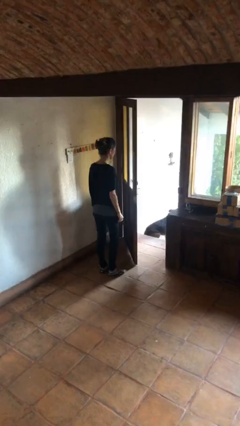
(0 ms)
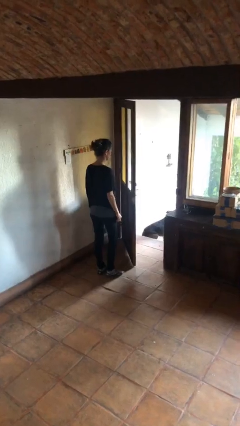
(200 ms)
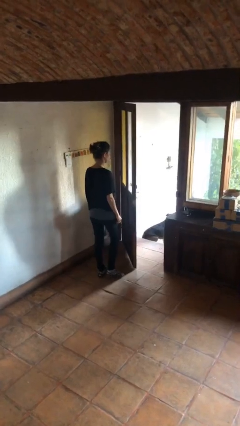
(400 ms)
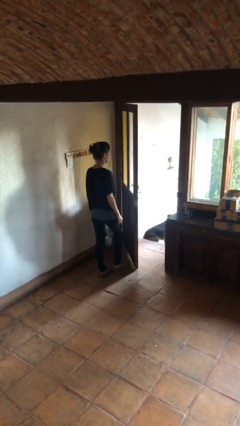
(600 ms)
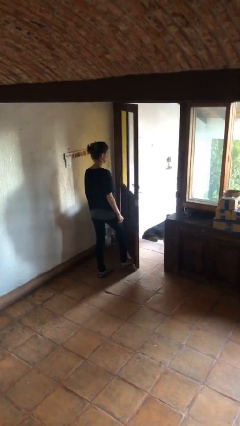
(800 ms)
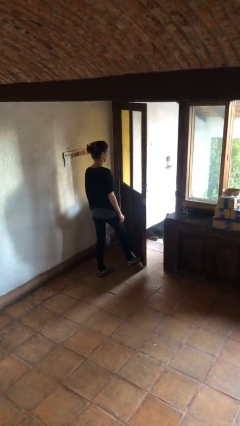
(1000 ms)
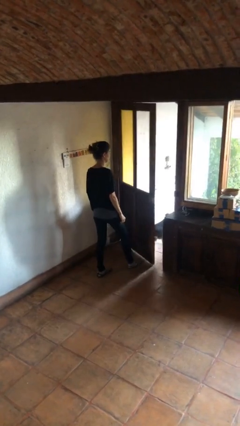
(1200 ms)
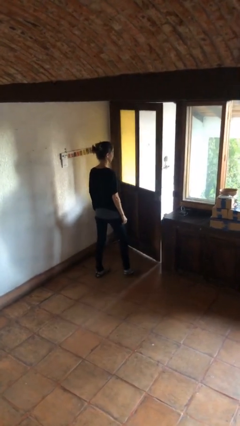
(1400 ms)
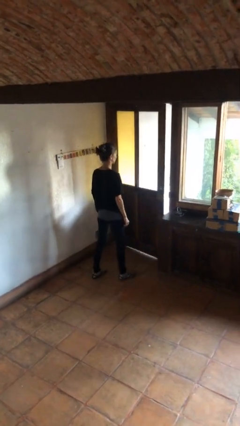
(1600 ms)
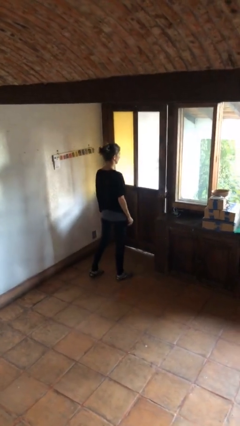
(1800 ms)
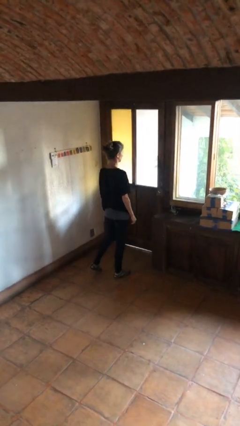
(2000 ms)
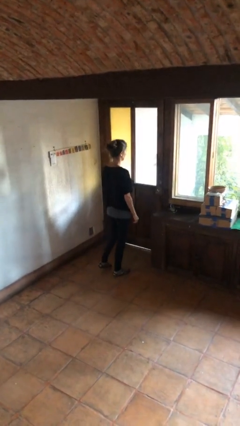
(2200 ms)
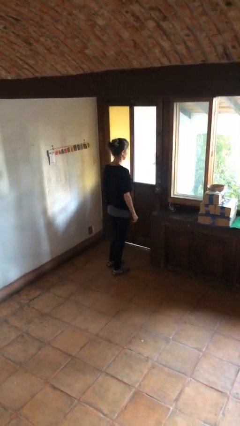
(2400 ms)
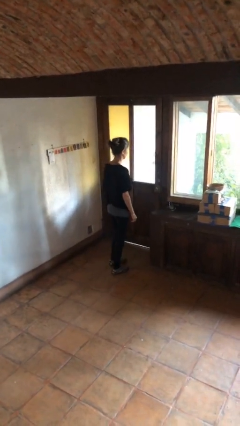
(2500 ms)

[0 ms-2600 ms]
person closes door with foot

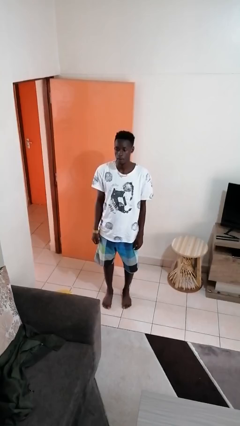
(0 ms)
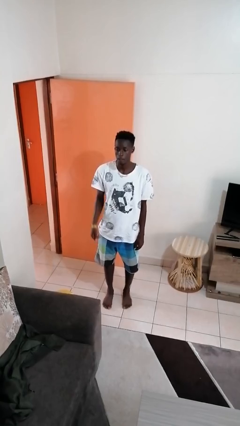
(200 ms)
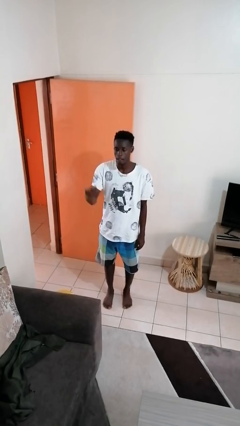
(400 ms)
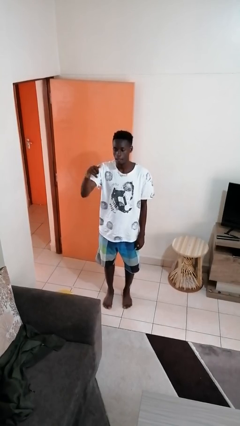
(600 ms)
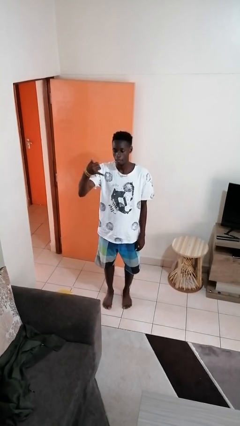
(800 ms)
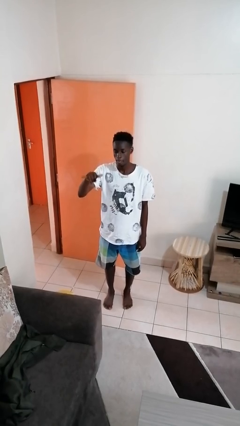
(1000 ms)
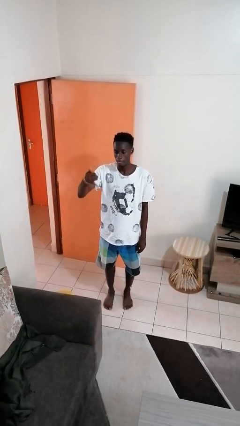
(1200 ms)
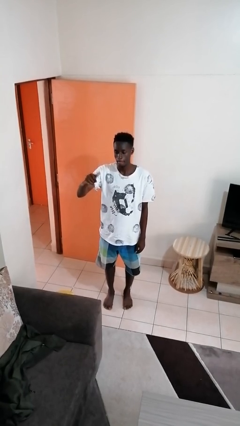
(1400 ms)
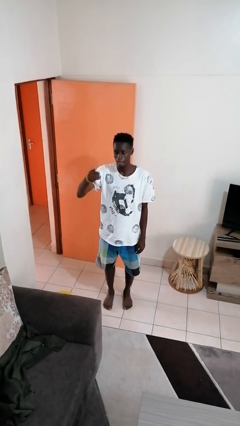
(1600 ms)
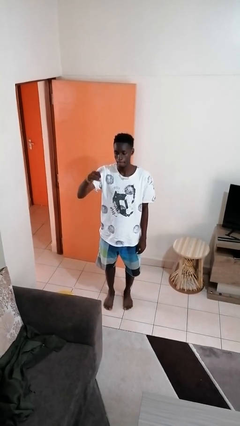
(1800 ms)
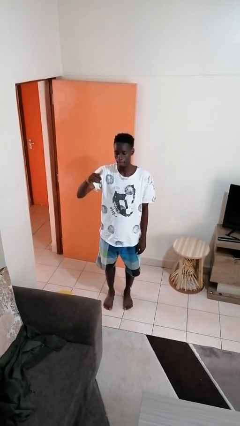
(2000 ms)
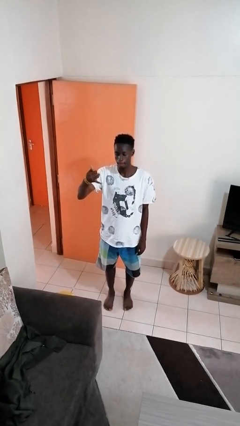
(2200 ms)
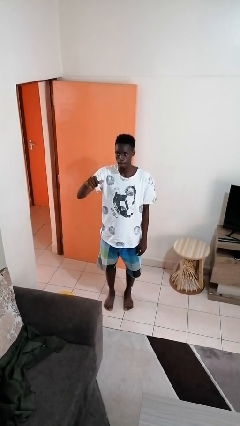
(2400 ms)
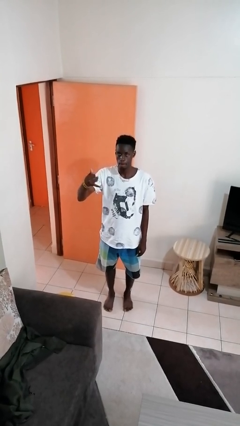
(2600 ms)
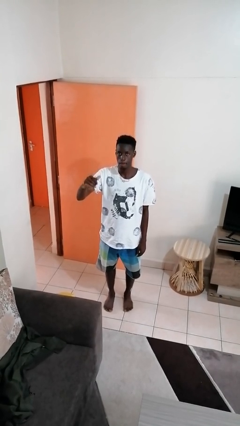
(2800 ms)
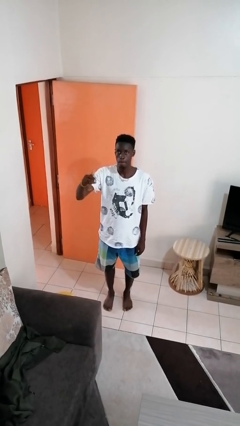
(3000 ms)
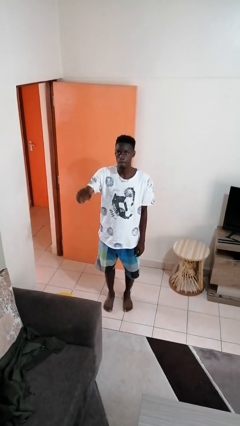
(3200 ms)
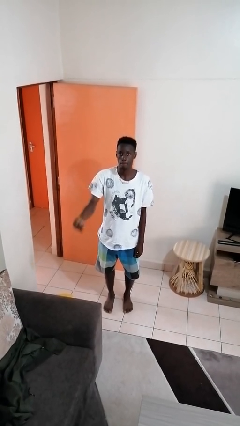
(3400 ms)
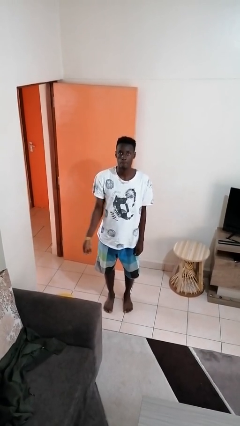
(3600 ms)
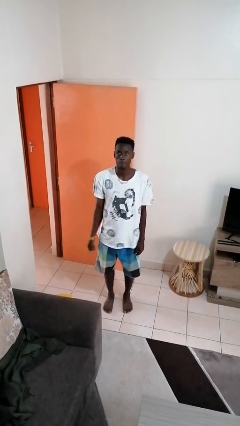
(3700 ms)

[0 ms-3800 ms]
person gestures hang loose

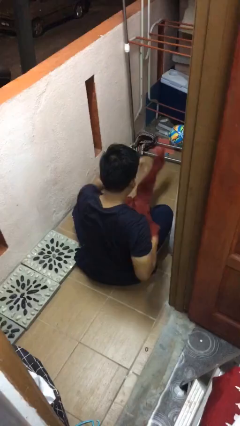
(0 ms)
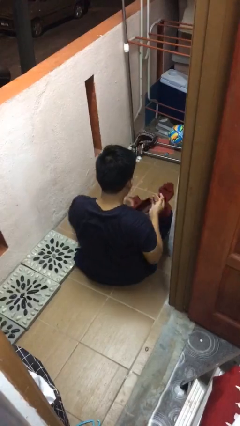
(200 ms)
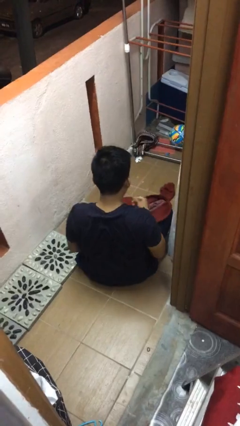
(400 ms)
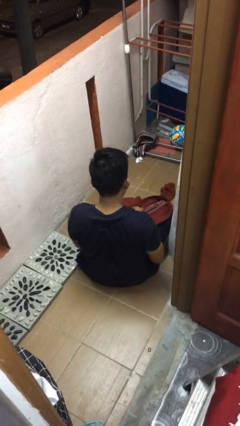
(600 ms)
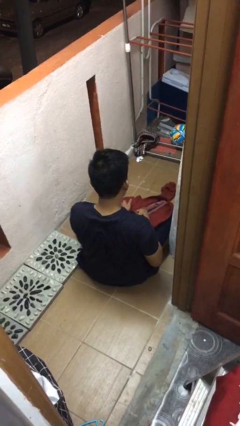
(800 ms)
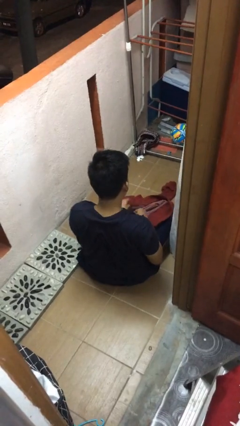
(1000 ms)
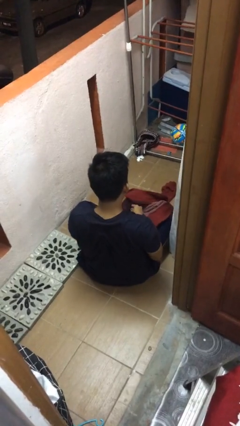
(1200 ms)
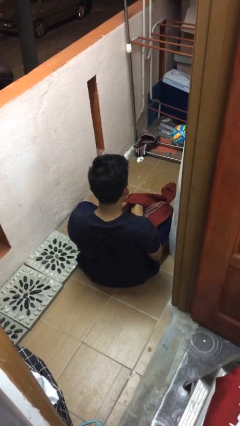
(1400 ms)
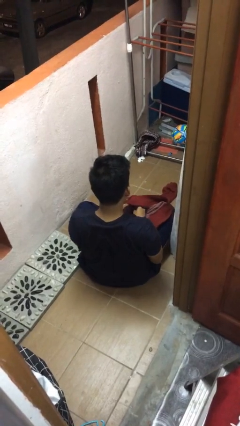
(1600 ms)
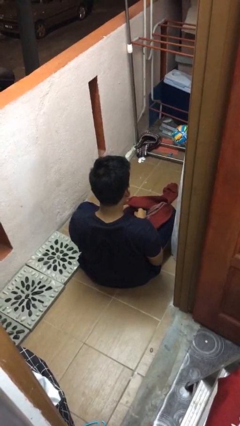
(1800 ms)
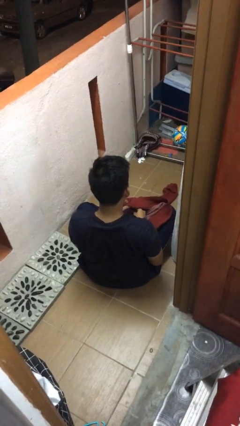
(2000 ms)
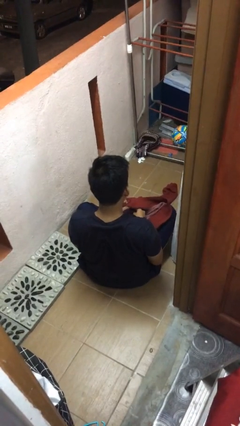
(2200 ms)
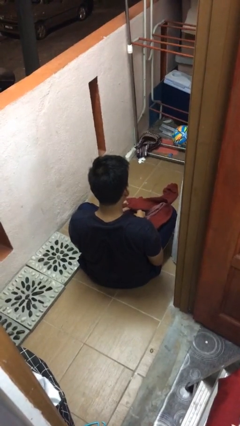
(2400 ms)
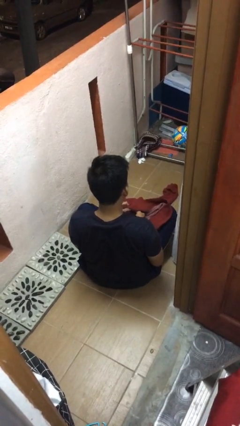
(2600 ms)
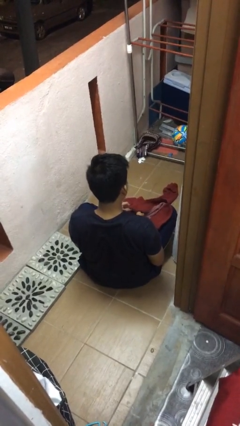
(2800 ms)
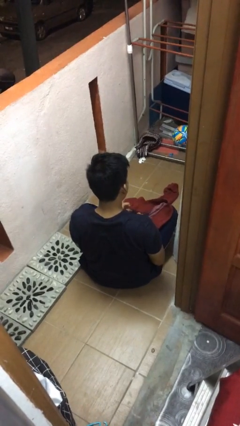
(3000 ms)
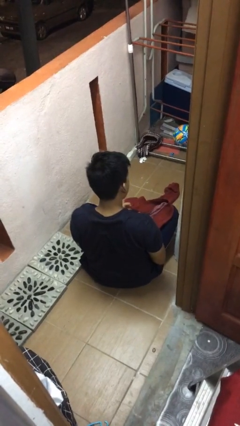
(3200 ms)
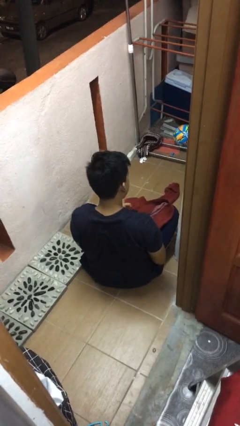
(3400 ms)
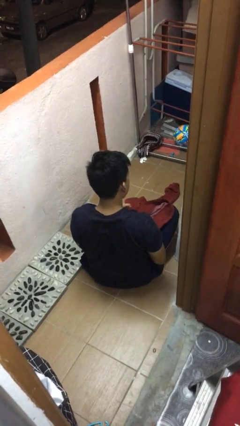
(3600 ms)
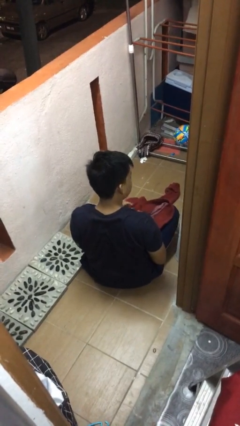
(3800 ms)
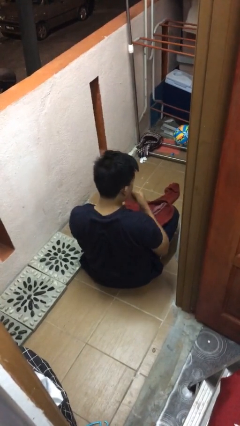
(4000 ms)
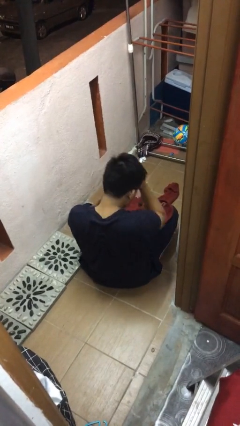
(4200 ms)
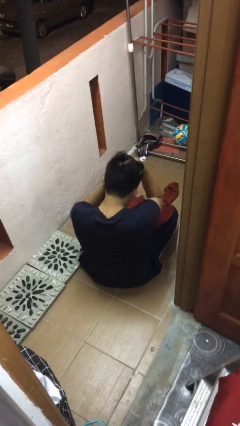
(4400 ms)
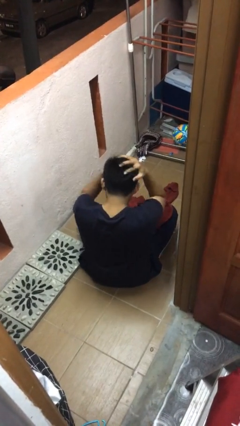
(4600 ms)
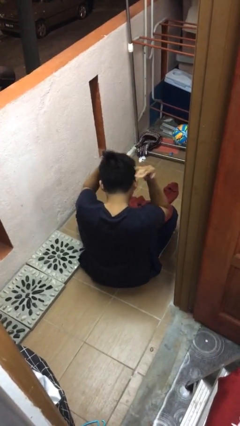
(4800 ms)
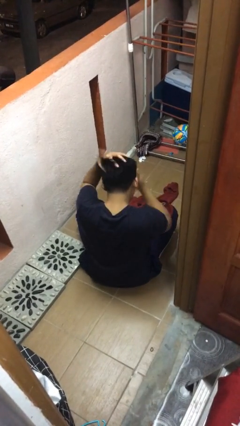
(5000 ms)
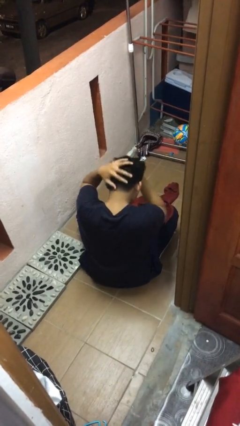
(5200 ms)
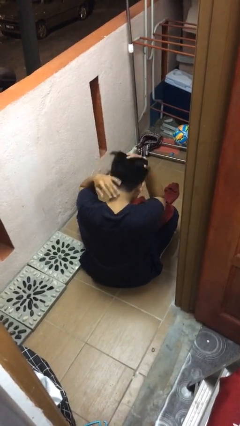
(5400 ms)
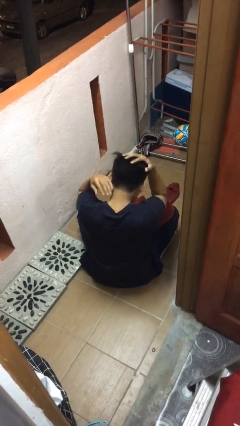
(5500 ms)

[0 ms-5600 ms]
person puts on hoodie

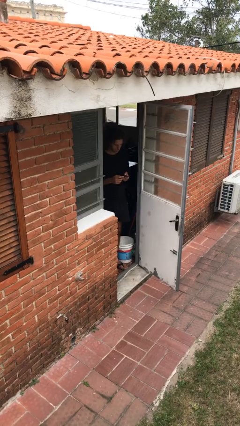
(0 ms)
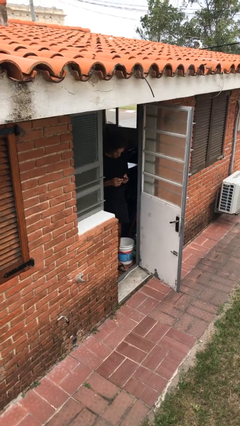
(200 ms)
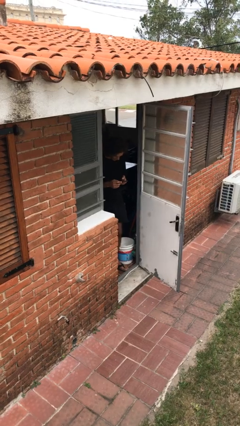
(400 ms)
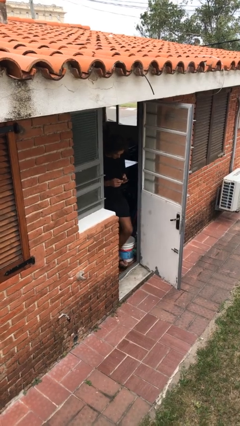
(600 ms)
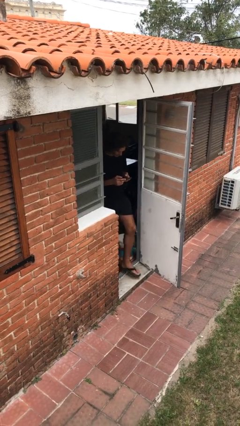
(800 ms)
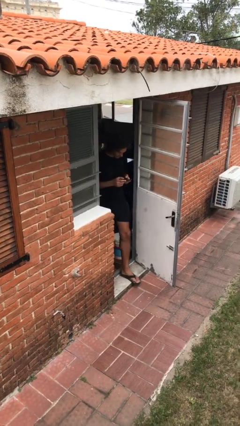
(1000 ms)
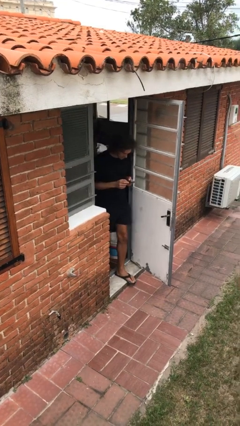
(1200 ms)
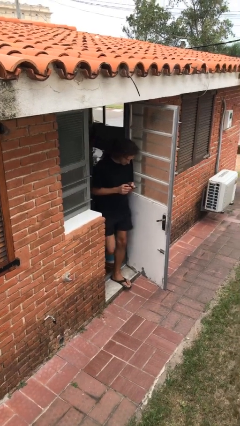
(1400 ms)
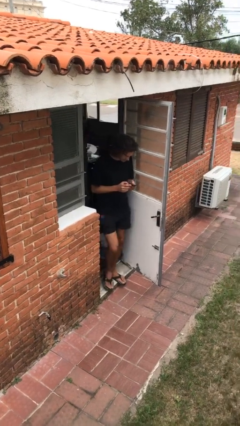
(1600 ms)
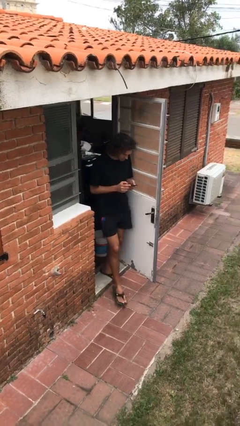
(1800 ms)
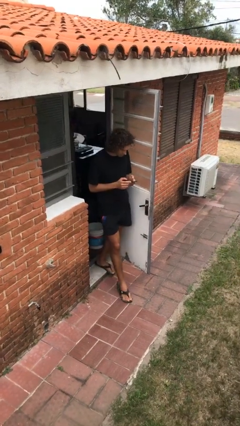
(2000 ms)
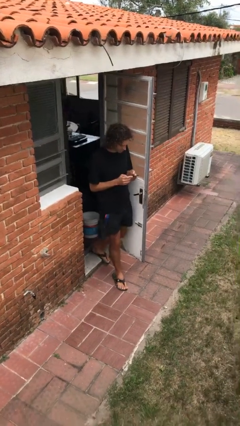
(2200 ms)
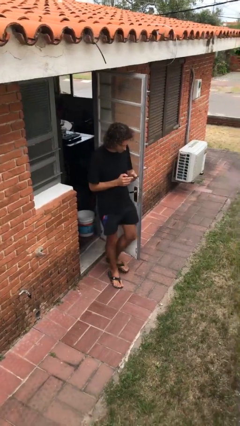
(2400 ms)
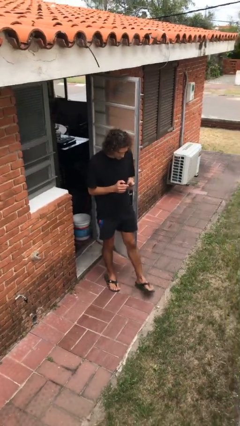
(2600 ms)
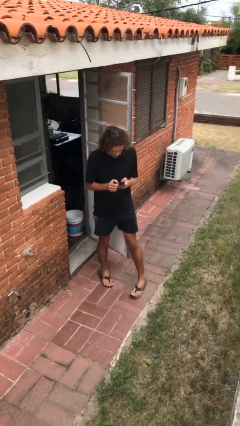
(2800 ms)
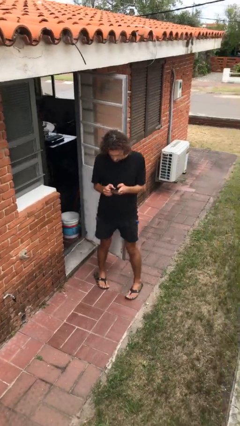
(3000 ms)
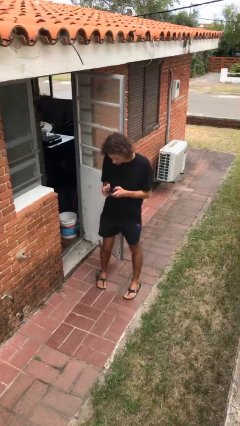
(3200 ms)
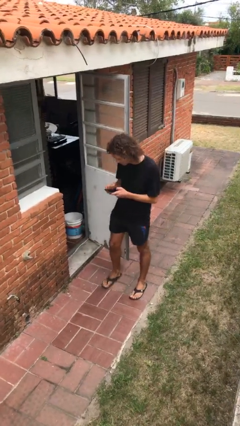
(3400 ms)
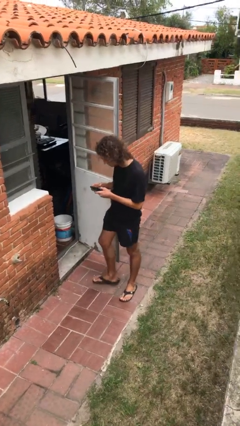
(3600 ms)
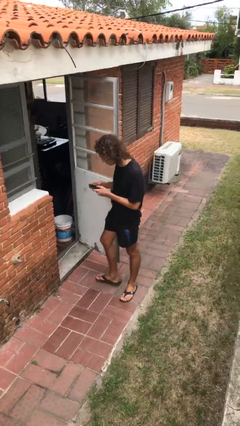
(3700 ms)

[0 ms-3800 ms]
person enters scene through structure

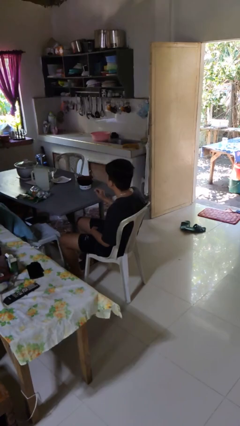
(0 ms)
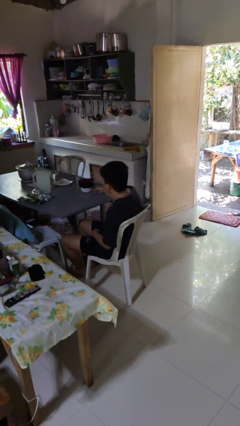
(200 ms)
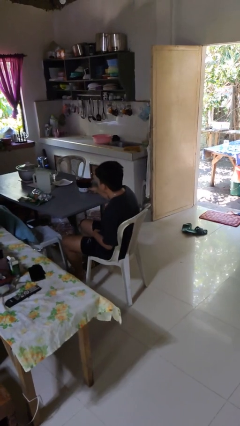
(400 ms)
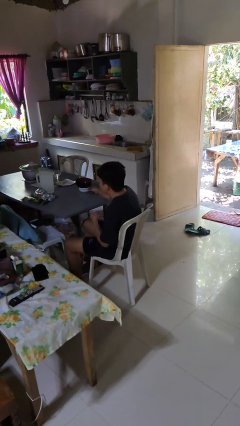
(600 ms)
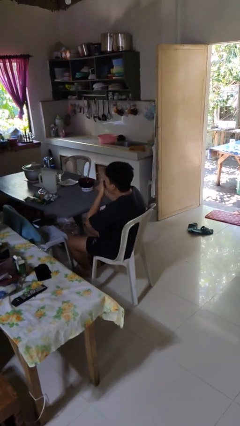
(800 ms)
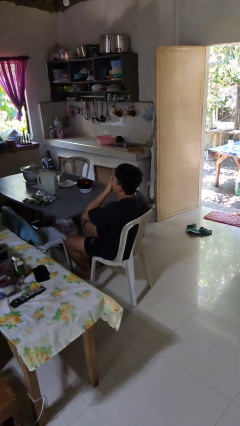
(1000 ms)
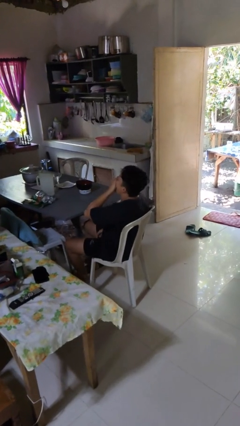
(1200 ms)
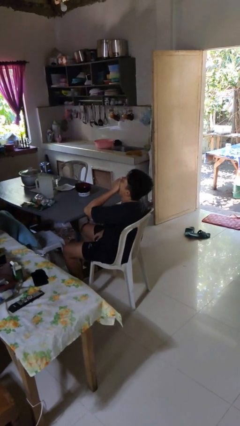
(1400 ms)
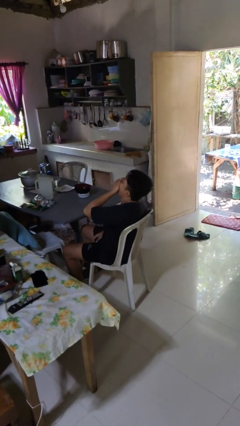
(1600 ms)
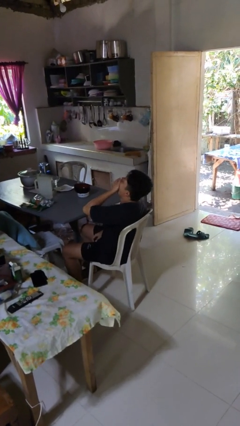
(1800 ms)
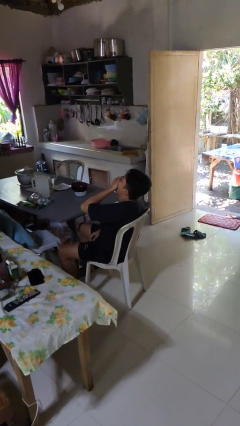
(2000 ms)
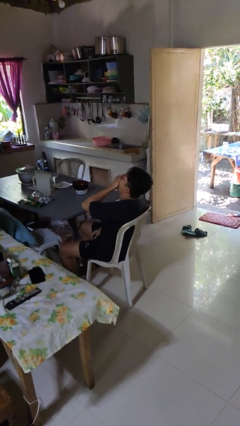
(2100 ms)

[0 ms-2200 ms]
person yawns
